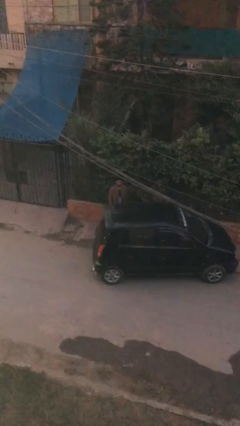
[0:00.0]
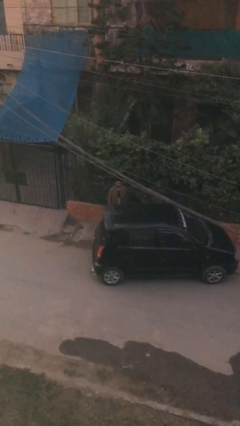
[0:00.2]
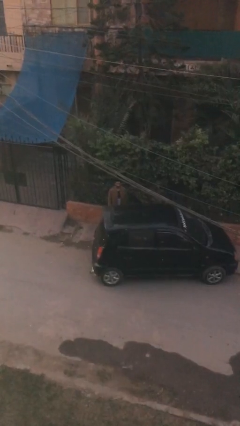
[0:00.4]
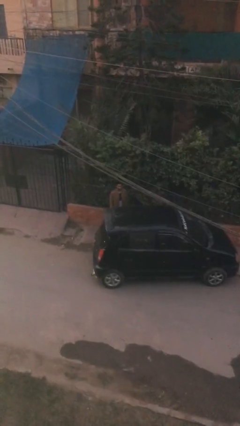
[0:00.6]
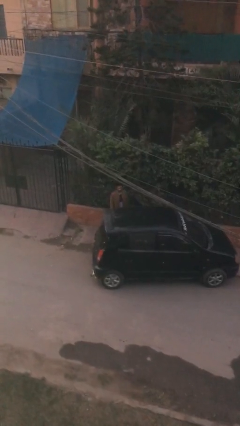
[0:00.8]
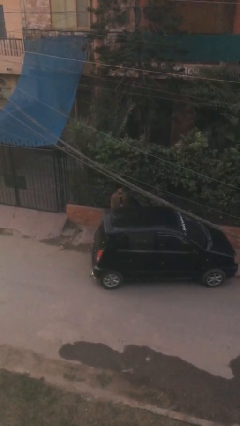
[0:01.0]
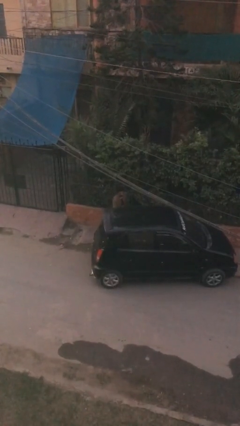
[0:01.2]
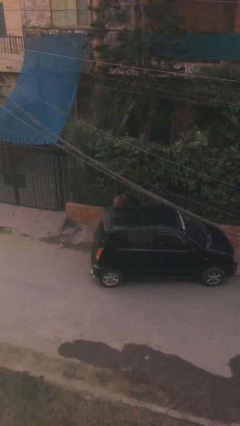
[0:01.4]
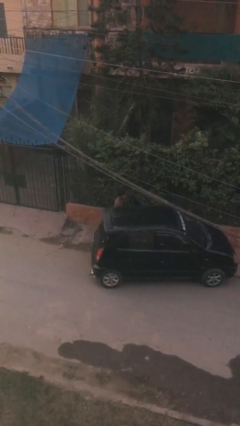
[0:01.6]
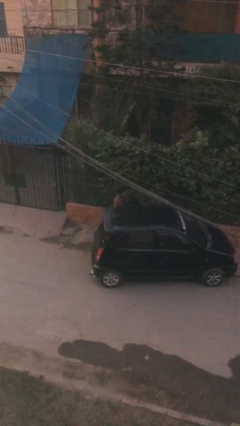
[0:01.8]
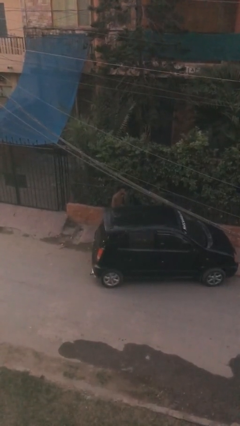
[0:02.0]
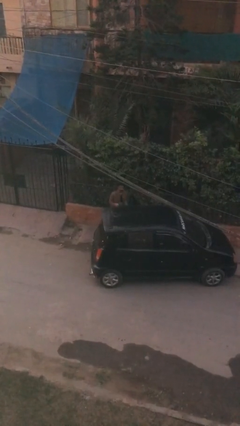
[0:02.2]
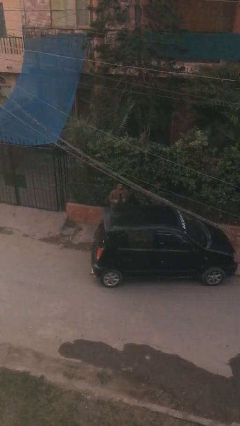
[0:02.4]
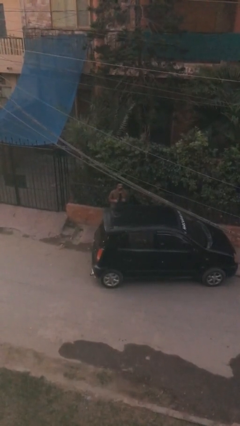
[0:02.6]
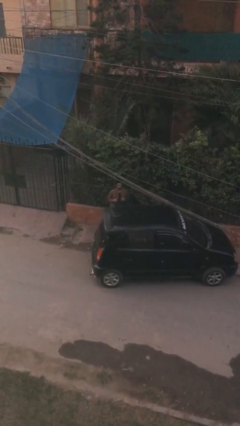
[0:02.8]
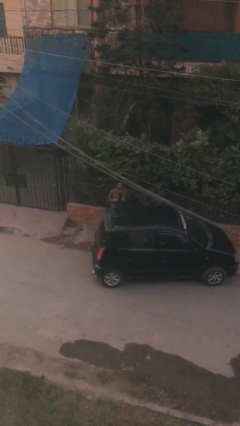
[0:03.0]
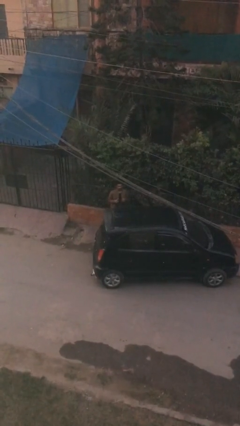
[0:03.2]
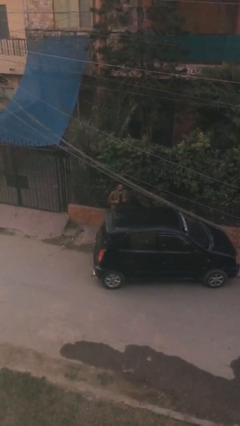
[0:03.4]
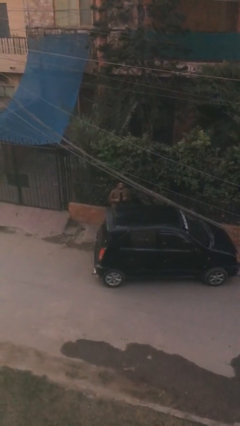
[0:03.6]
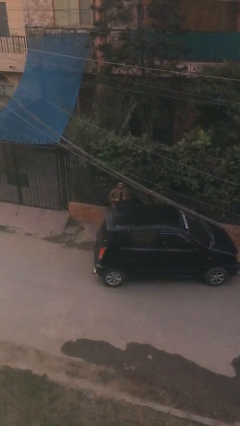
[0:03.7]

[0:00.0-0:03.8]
person unloads car

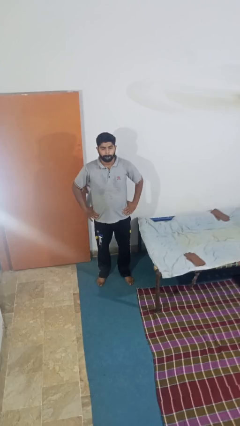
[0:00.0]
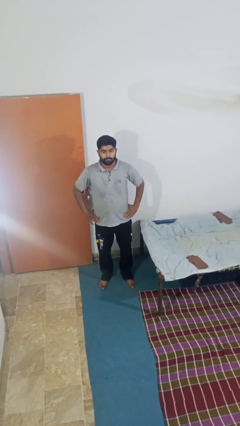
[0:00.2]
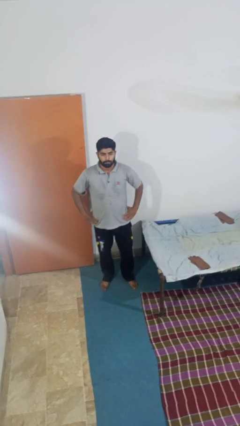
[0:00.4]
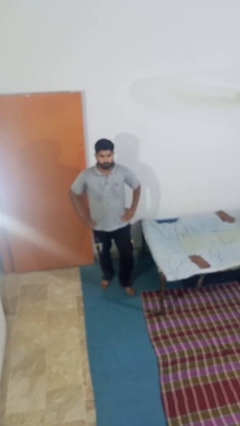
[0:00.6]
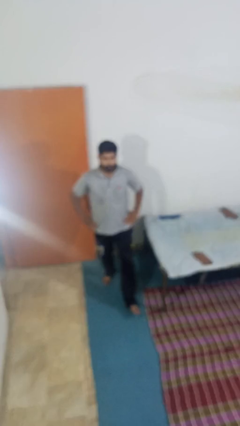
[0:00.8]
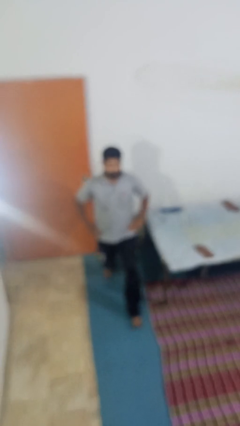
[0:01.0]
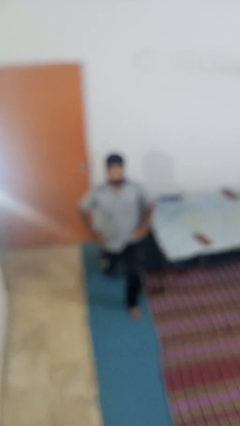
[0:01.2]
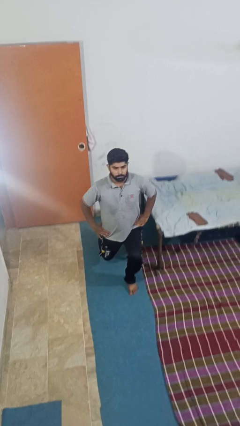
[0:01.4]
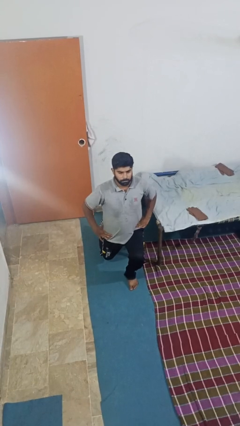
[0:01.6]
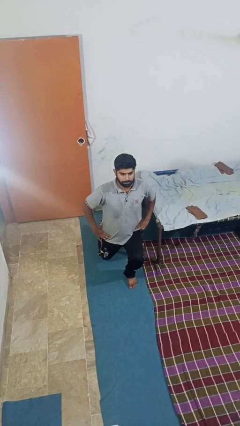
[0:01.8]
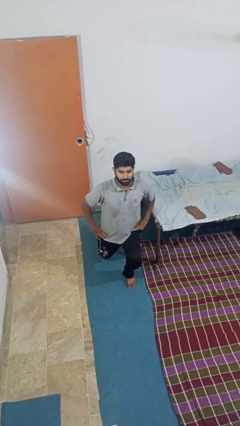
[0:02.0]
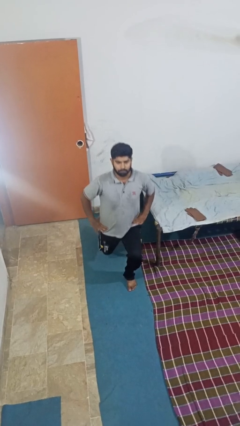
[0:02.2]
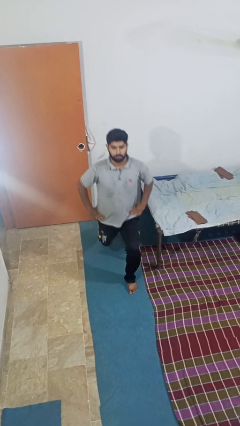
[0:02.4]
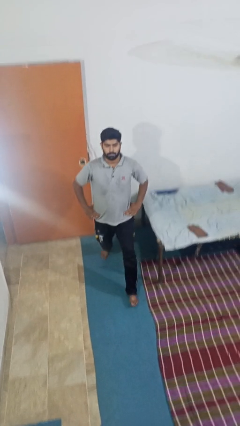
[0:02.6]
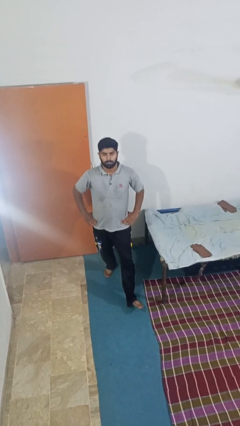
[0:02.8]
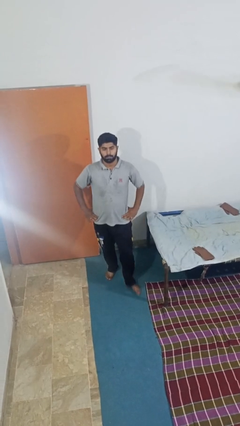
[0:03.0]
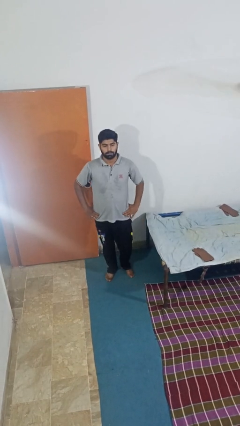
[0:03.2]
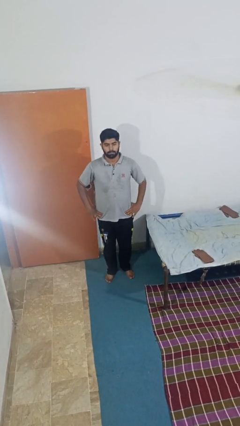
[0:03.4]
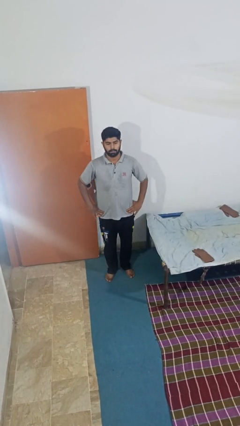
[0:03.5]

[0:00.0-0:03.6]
person exercises with lunges

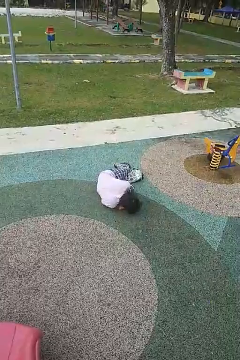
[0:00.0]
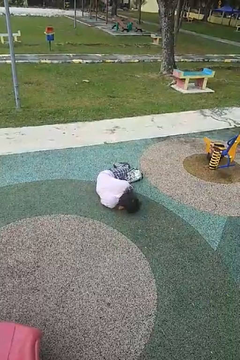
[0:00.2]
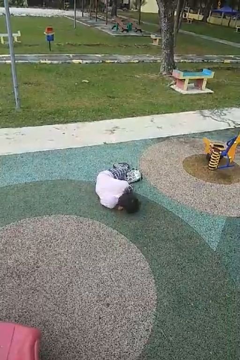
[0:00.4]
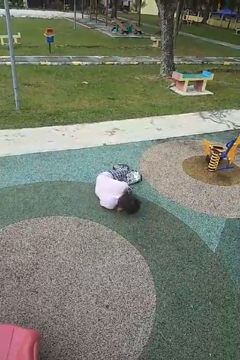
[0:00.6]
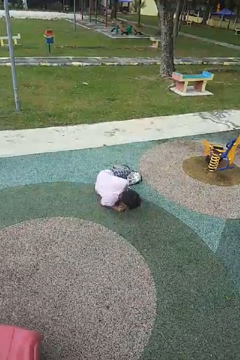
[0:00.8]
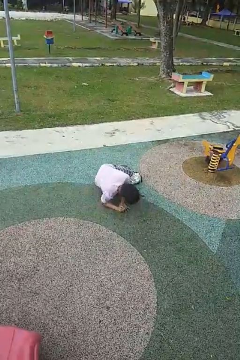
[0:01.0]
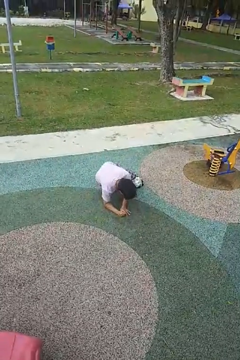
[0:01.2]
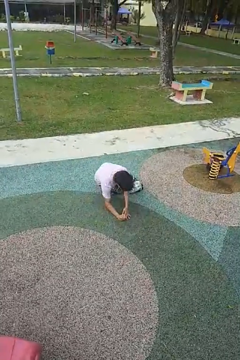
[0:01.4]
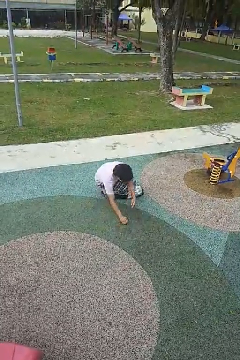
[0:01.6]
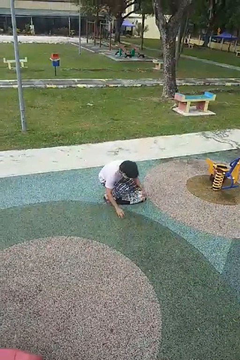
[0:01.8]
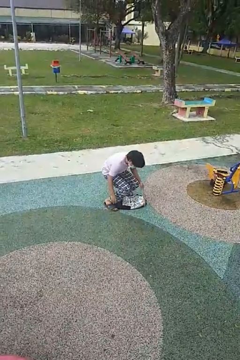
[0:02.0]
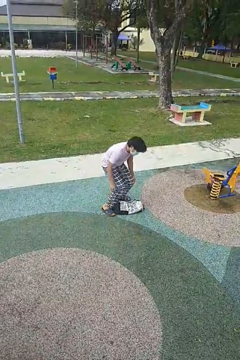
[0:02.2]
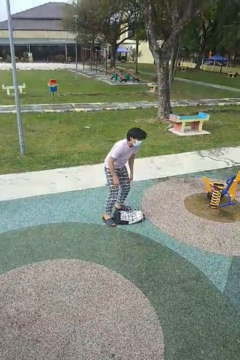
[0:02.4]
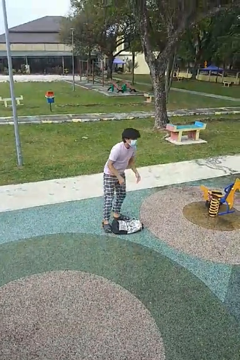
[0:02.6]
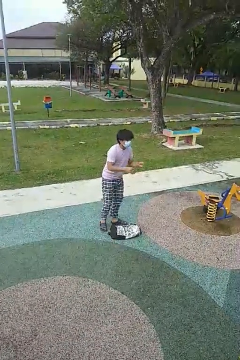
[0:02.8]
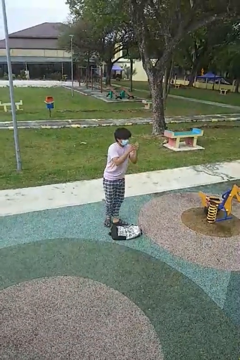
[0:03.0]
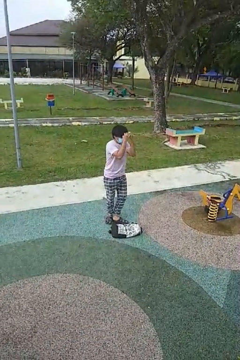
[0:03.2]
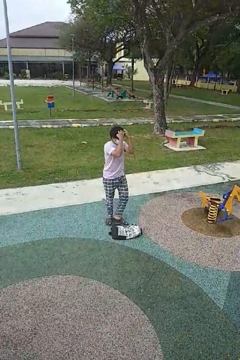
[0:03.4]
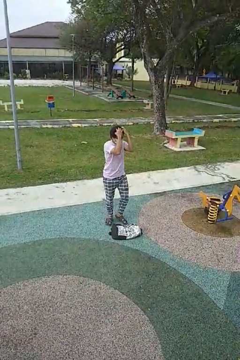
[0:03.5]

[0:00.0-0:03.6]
person stands up from floor

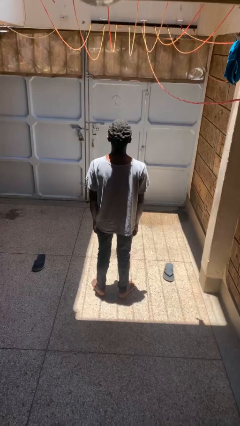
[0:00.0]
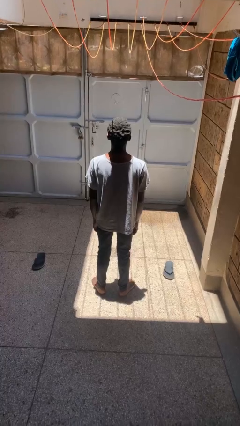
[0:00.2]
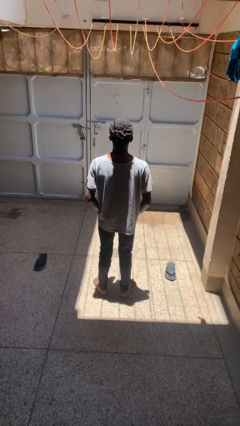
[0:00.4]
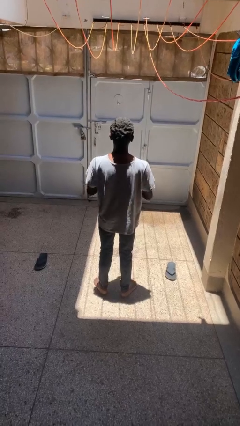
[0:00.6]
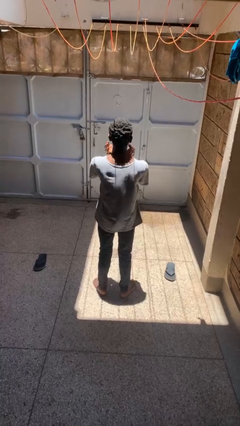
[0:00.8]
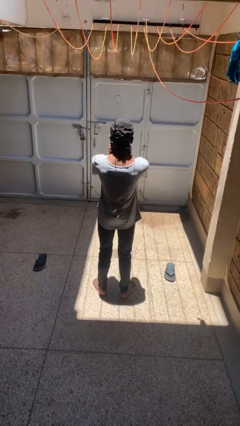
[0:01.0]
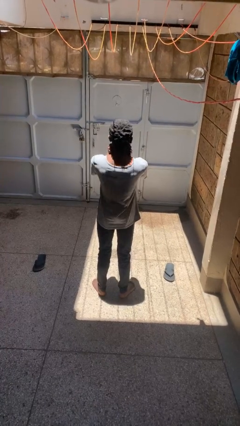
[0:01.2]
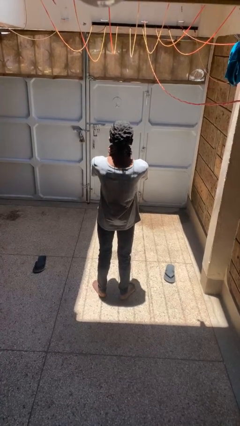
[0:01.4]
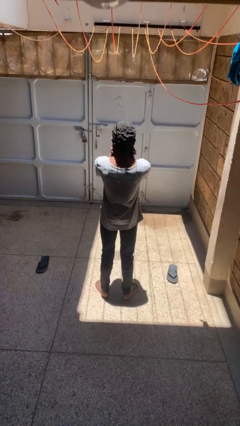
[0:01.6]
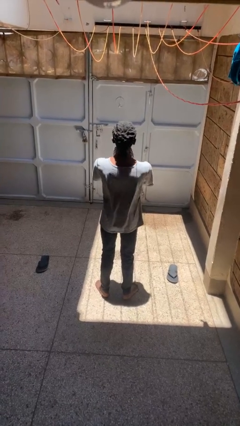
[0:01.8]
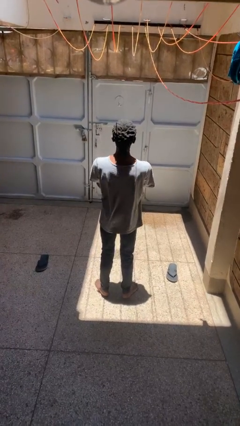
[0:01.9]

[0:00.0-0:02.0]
person rubs neck

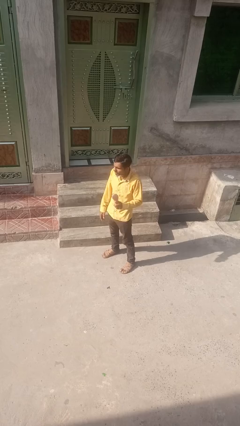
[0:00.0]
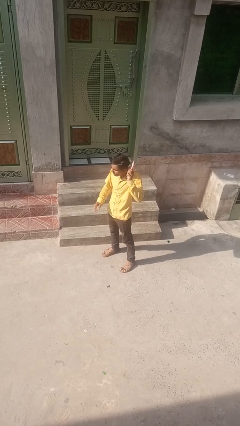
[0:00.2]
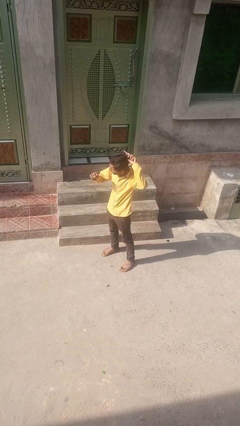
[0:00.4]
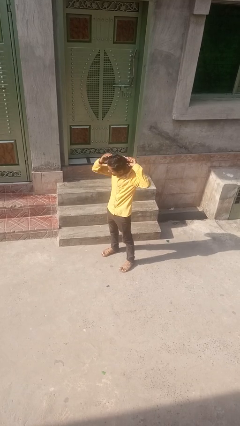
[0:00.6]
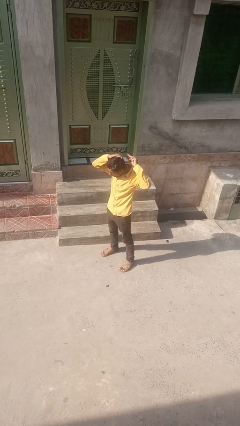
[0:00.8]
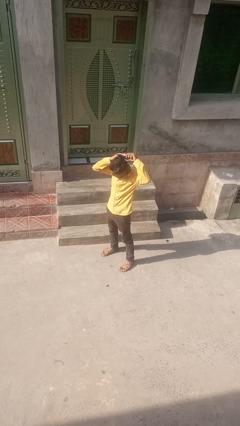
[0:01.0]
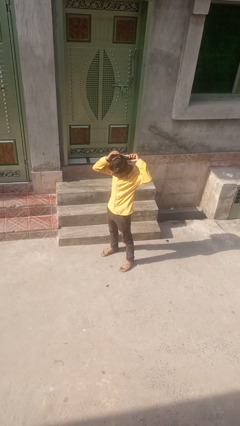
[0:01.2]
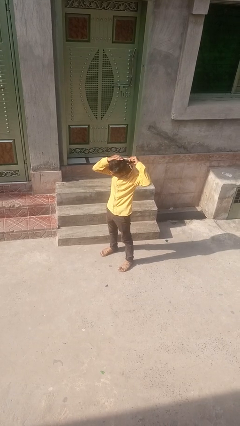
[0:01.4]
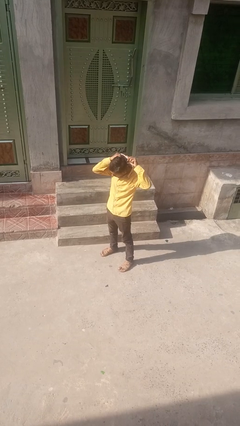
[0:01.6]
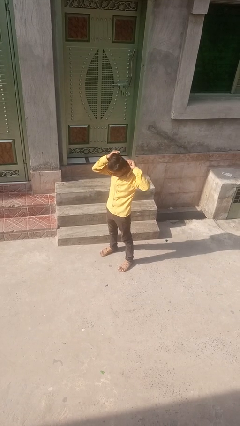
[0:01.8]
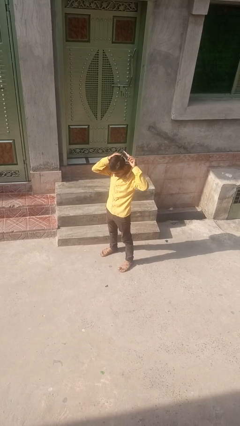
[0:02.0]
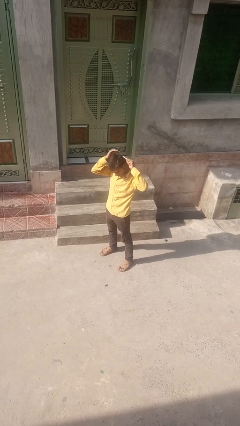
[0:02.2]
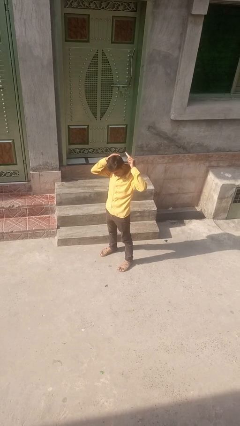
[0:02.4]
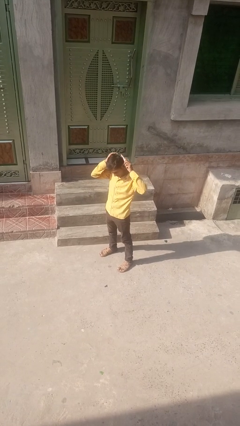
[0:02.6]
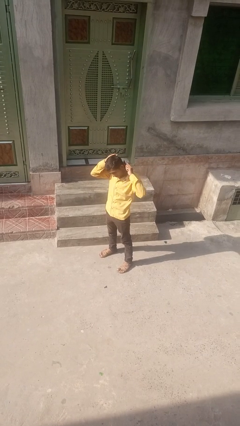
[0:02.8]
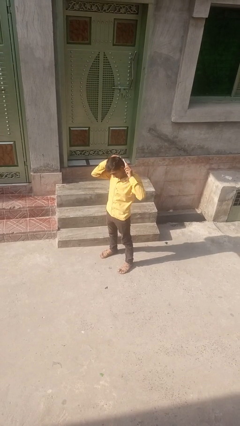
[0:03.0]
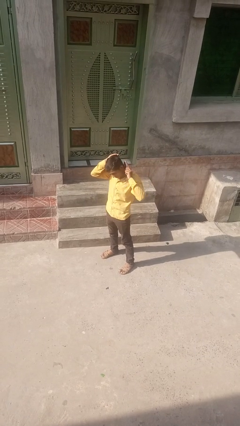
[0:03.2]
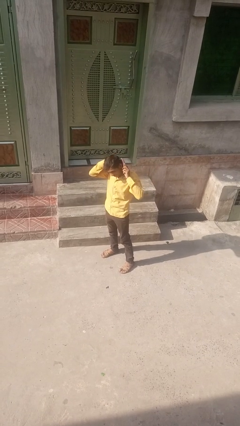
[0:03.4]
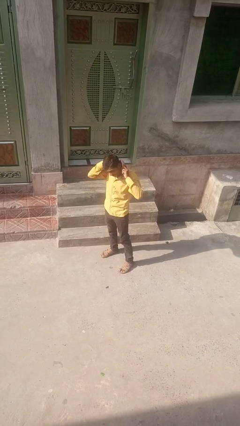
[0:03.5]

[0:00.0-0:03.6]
person brushes hair

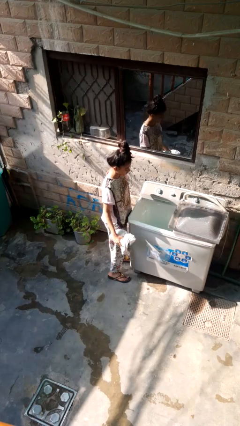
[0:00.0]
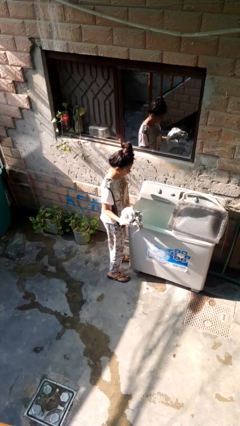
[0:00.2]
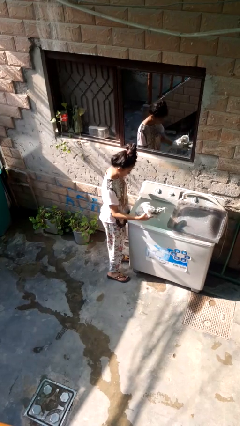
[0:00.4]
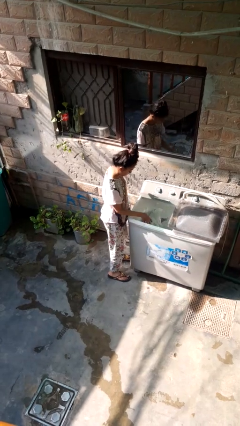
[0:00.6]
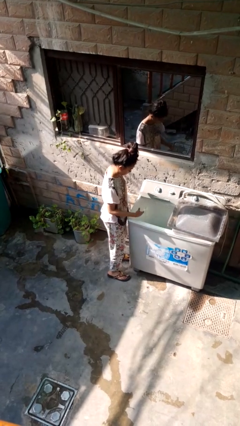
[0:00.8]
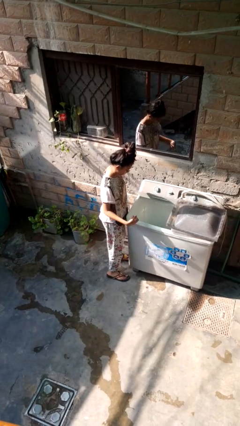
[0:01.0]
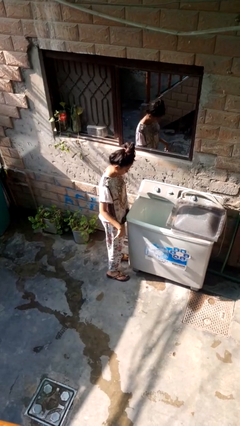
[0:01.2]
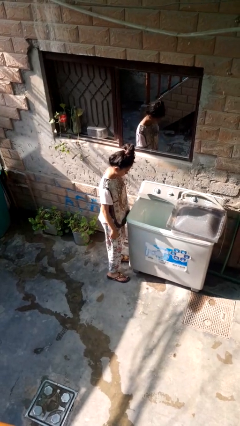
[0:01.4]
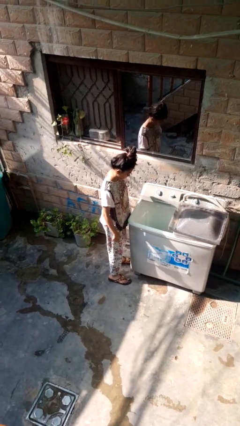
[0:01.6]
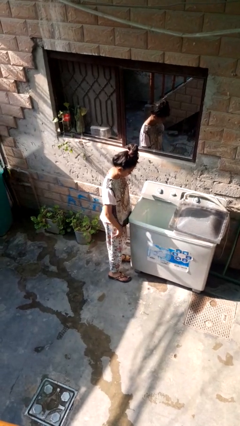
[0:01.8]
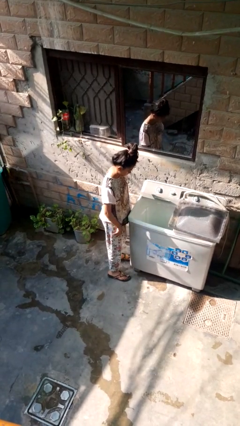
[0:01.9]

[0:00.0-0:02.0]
person loads clotheswasher
